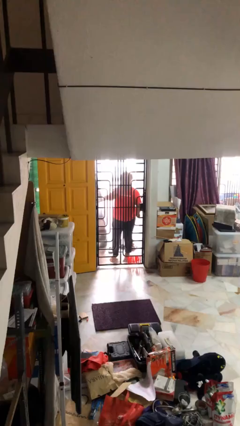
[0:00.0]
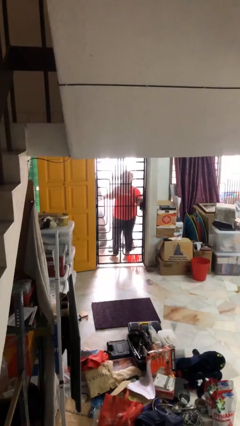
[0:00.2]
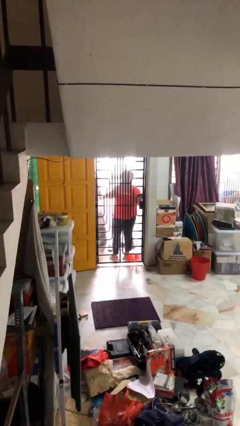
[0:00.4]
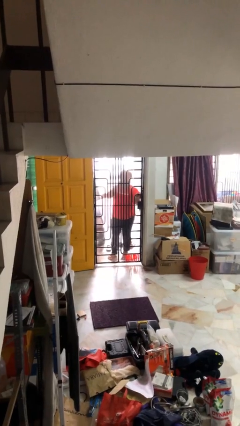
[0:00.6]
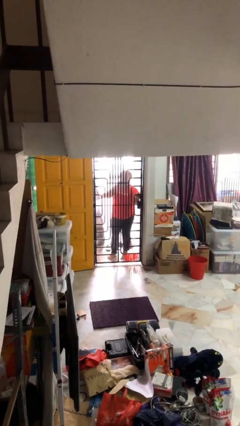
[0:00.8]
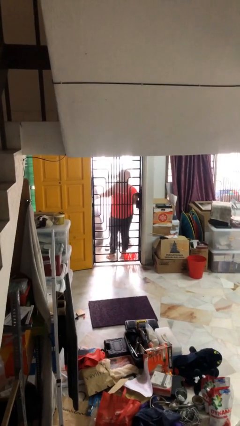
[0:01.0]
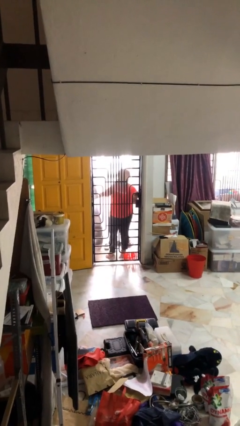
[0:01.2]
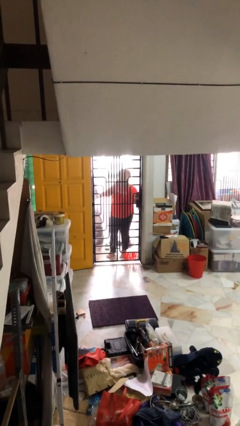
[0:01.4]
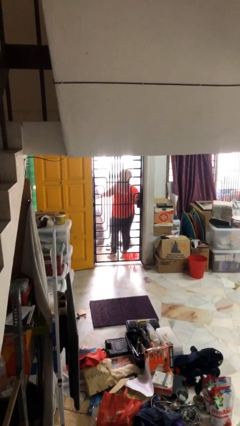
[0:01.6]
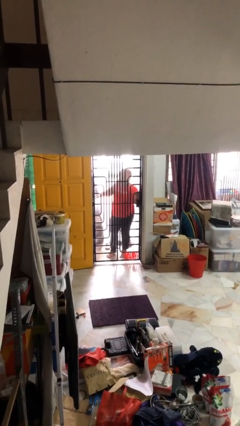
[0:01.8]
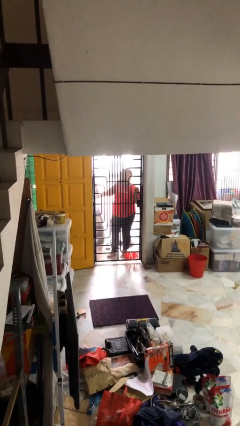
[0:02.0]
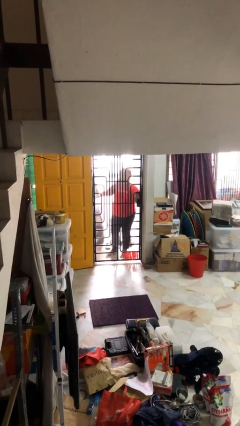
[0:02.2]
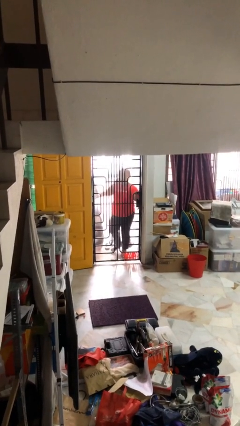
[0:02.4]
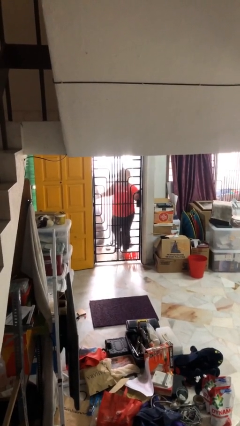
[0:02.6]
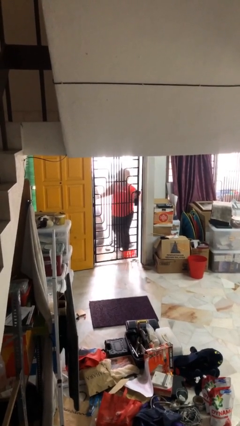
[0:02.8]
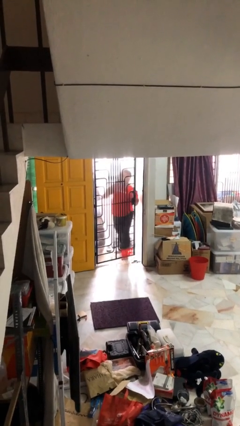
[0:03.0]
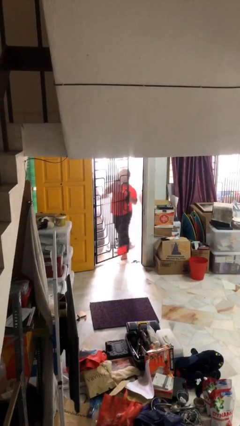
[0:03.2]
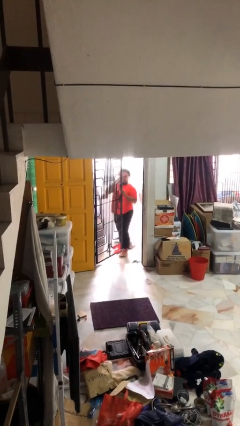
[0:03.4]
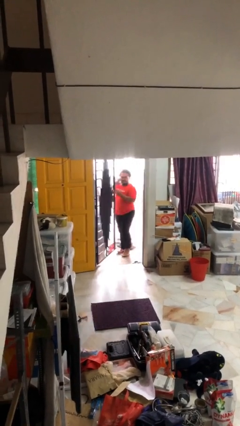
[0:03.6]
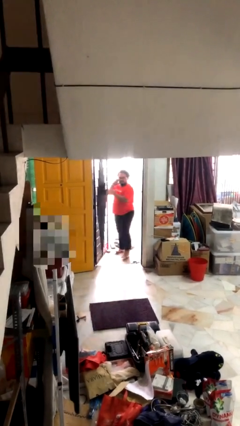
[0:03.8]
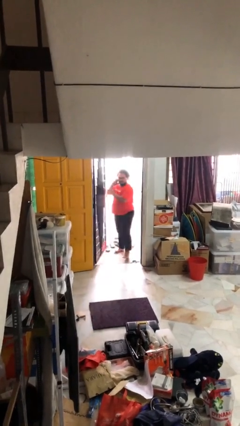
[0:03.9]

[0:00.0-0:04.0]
person opens facility door

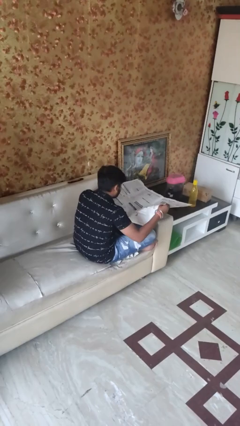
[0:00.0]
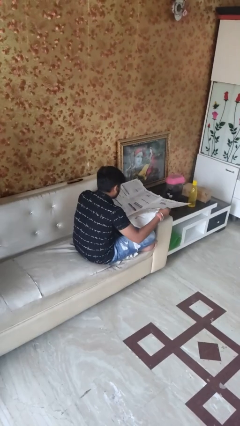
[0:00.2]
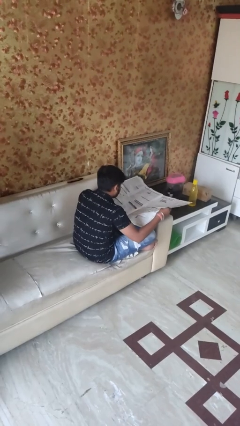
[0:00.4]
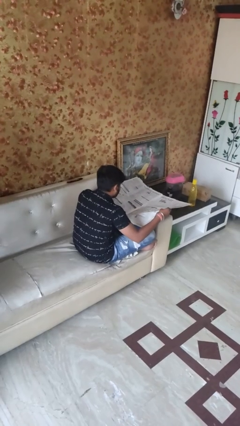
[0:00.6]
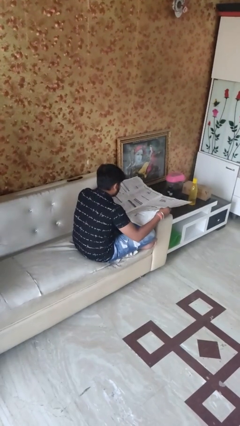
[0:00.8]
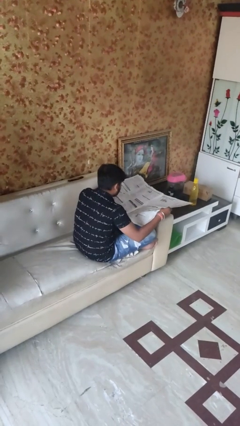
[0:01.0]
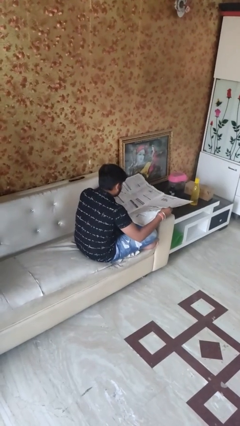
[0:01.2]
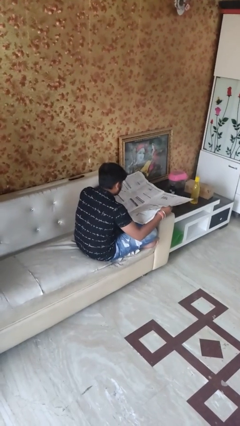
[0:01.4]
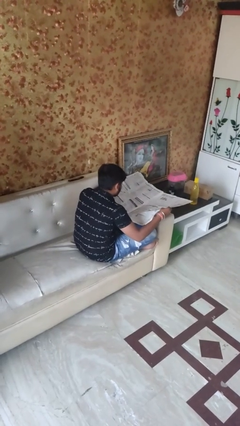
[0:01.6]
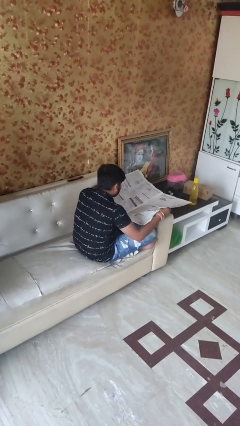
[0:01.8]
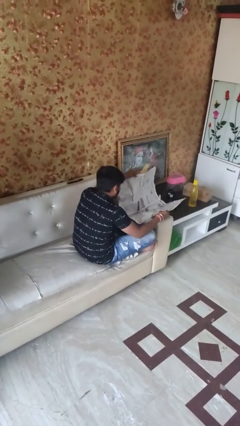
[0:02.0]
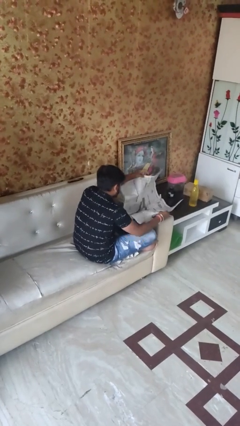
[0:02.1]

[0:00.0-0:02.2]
person reads newspaper

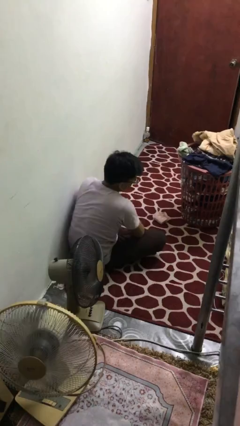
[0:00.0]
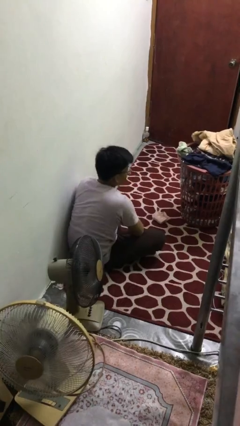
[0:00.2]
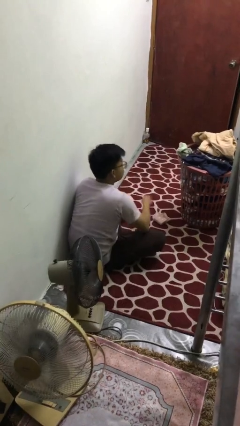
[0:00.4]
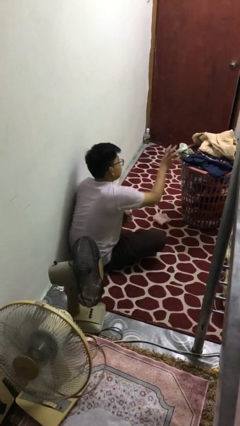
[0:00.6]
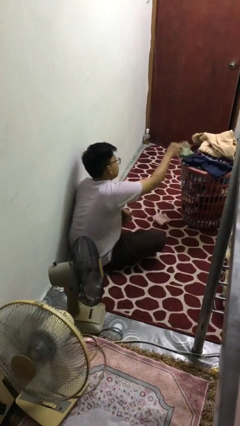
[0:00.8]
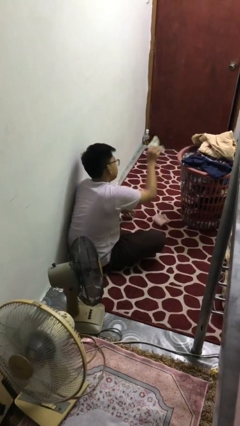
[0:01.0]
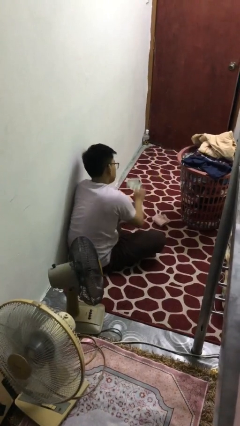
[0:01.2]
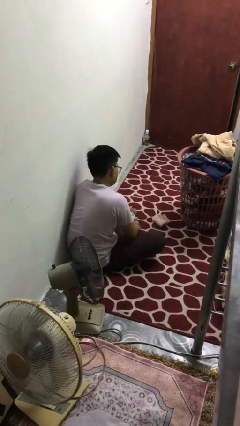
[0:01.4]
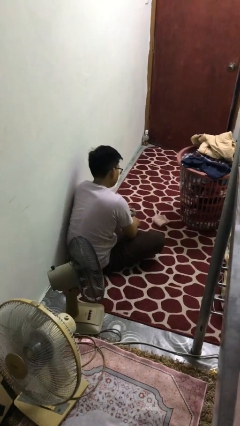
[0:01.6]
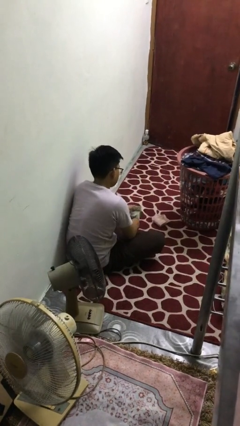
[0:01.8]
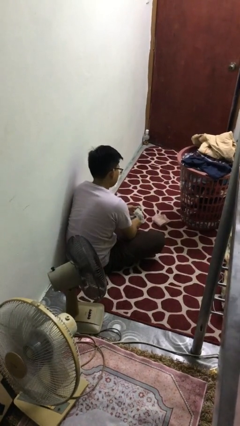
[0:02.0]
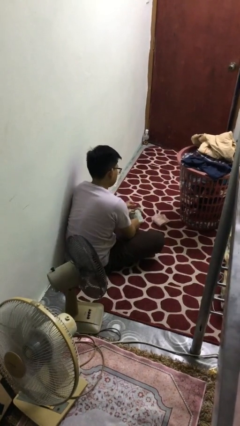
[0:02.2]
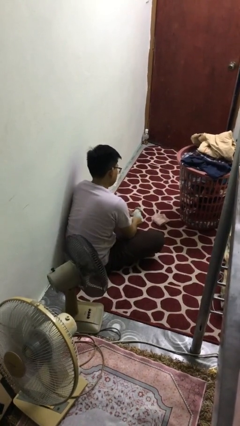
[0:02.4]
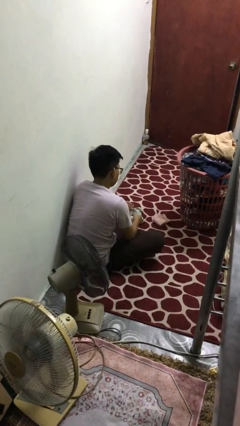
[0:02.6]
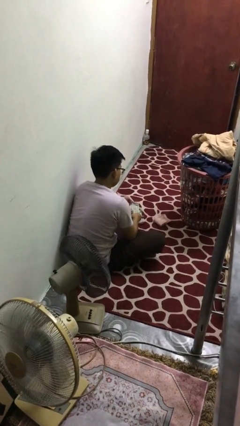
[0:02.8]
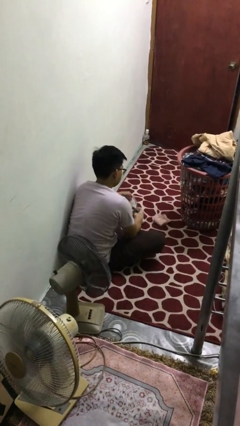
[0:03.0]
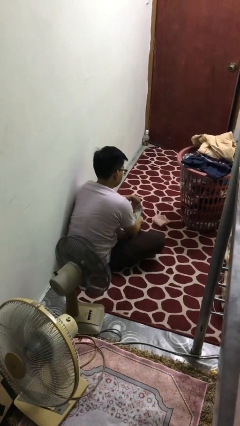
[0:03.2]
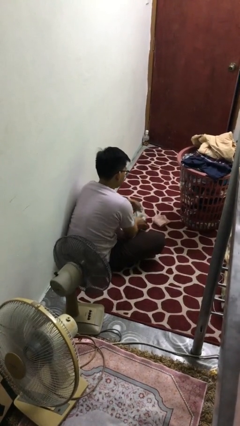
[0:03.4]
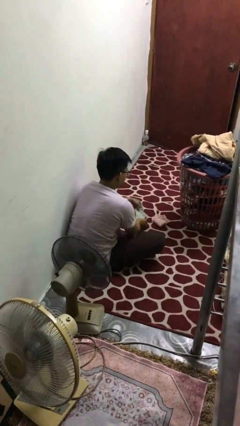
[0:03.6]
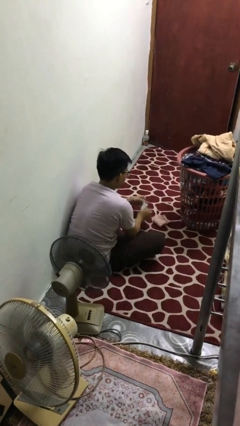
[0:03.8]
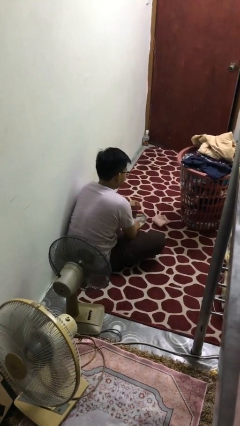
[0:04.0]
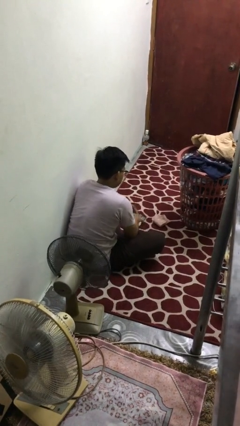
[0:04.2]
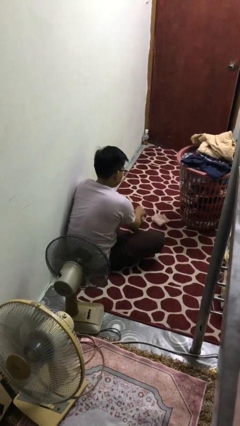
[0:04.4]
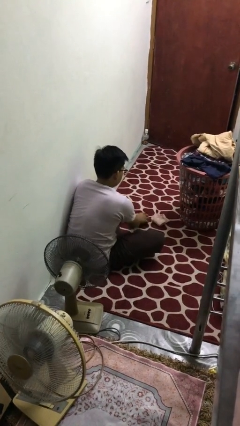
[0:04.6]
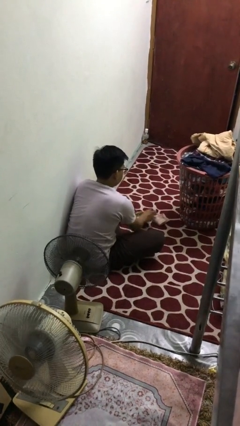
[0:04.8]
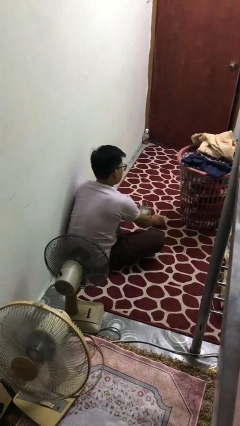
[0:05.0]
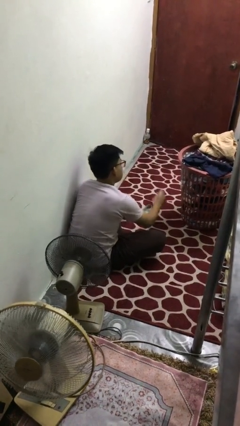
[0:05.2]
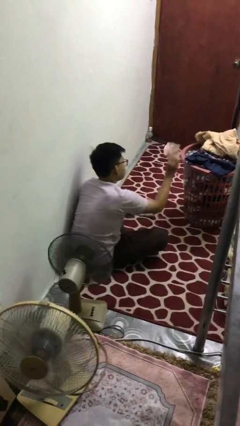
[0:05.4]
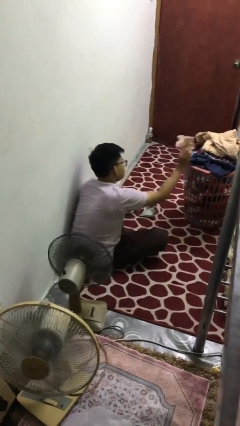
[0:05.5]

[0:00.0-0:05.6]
person folds socks

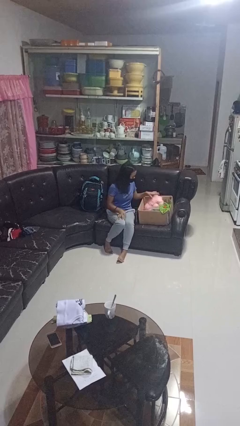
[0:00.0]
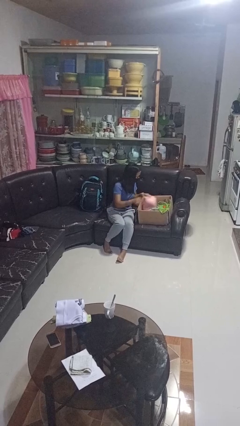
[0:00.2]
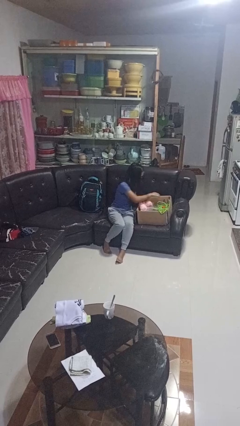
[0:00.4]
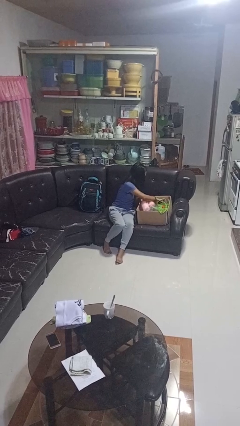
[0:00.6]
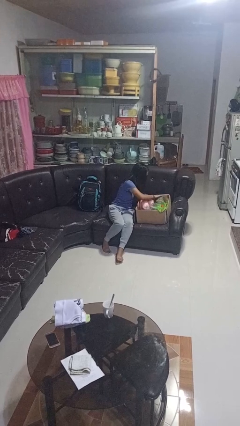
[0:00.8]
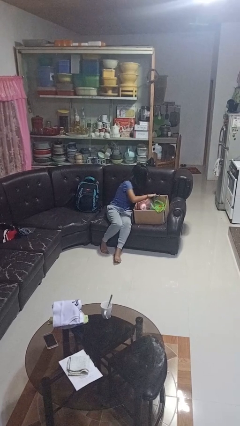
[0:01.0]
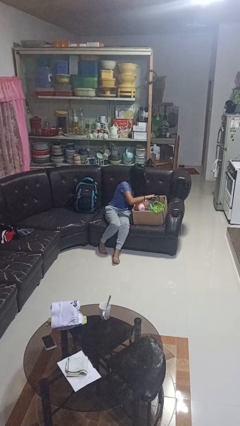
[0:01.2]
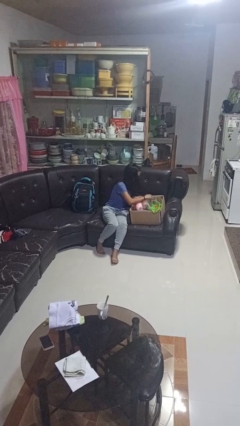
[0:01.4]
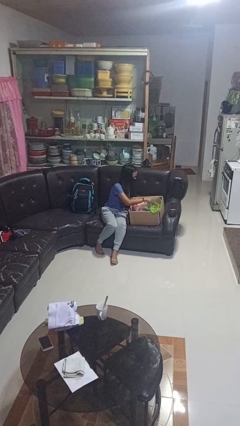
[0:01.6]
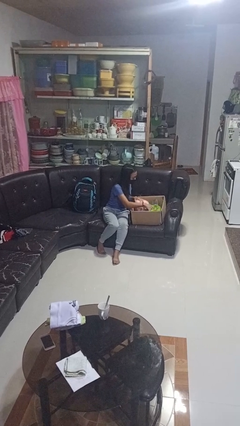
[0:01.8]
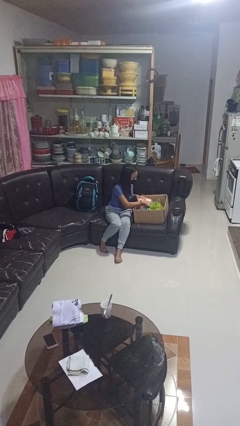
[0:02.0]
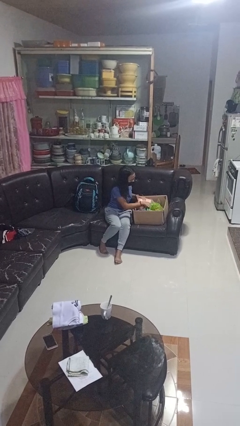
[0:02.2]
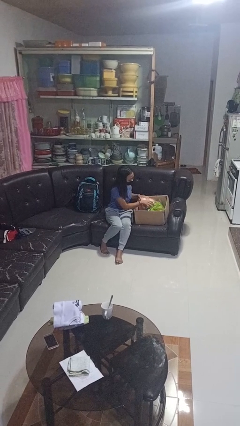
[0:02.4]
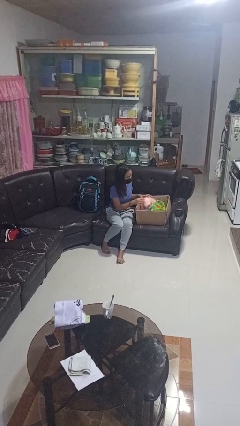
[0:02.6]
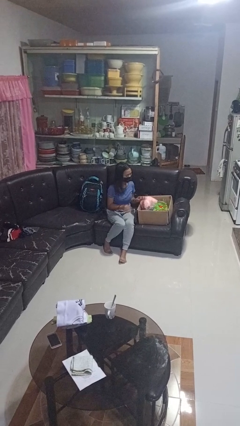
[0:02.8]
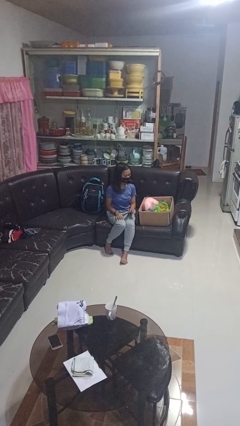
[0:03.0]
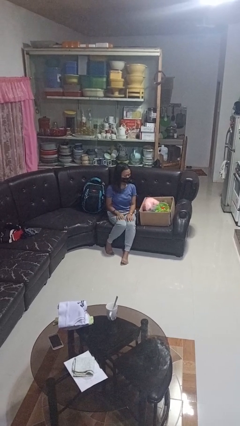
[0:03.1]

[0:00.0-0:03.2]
person searches in box

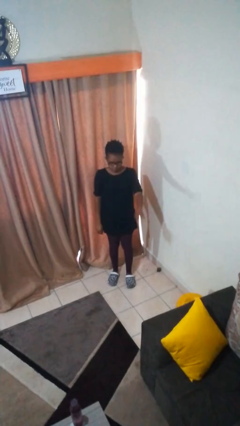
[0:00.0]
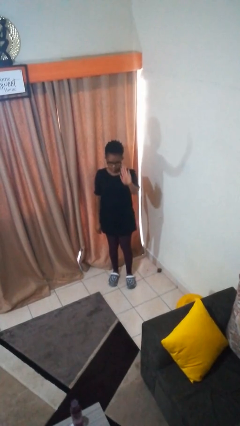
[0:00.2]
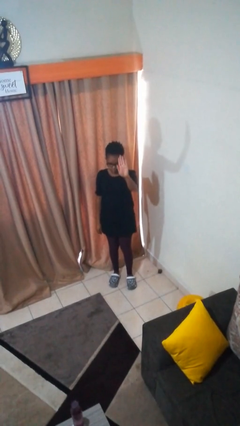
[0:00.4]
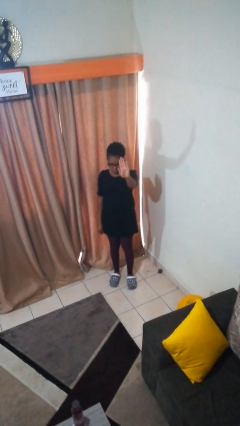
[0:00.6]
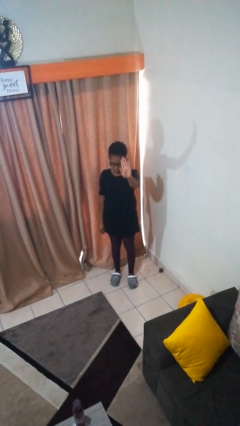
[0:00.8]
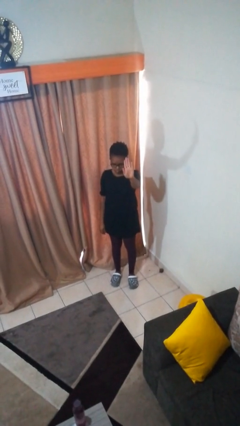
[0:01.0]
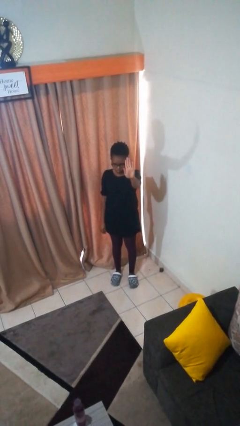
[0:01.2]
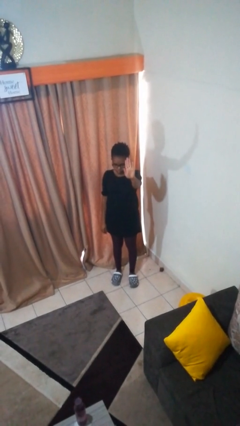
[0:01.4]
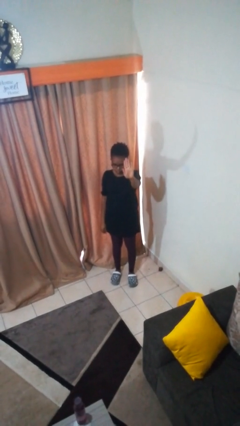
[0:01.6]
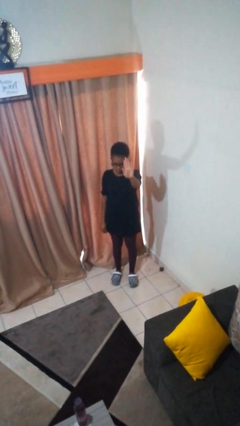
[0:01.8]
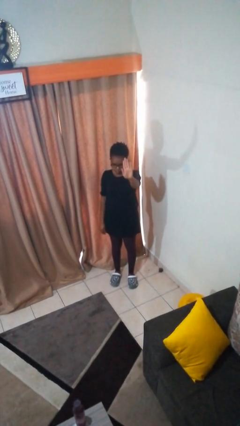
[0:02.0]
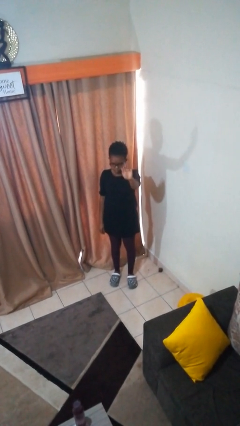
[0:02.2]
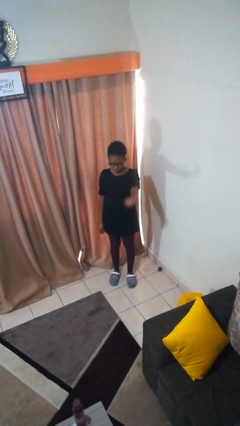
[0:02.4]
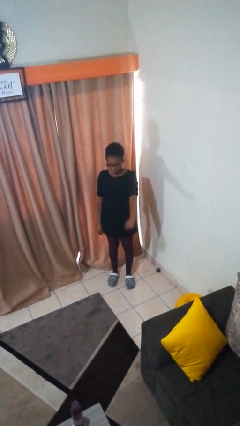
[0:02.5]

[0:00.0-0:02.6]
person gestures stop
